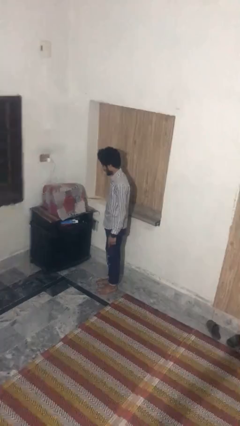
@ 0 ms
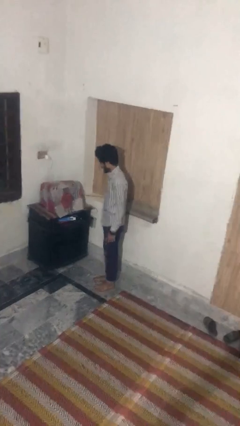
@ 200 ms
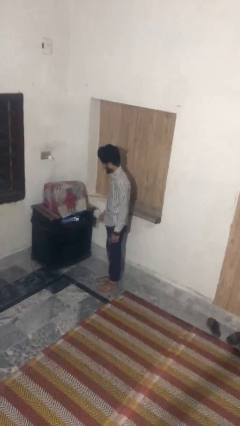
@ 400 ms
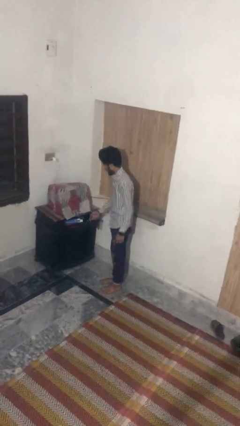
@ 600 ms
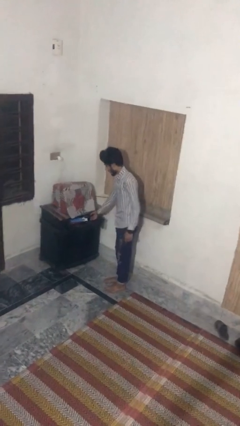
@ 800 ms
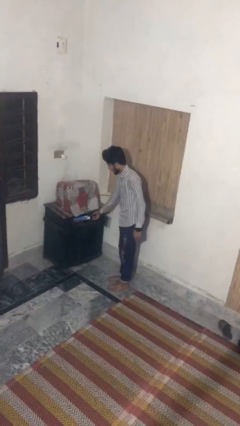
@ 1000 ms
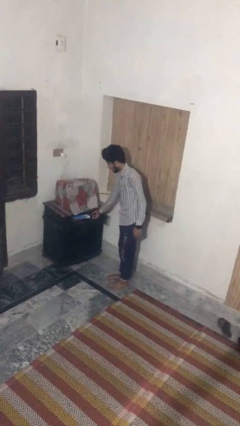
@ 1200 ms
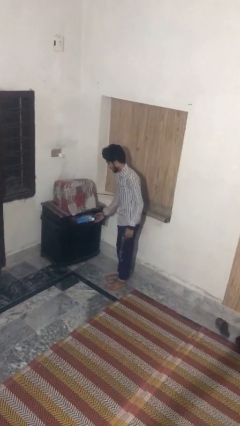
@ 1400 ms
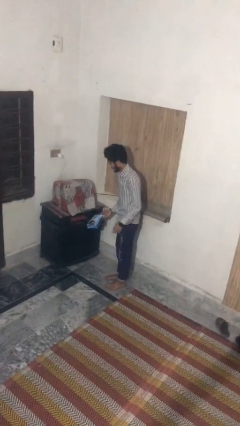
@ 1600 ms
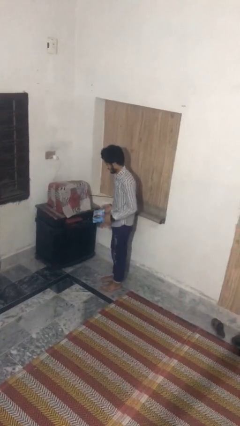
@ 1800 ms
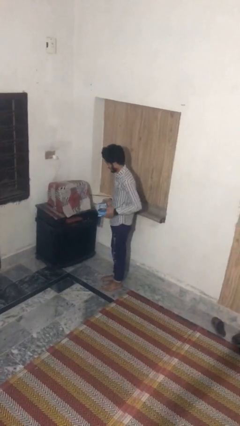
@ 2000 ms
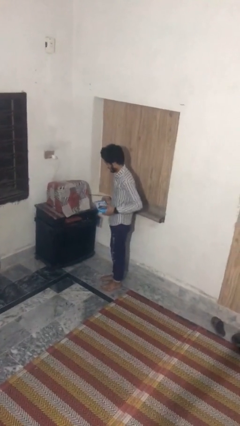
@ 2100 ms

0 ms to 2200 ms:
person picks up object from cabinet

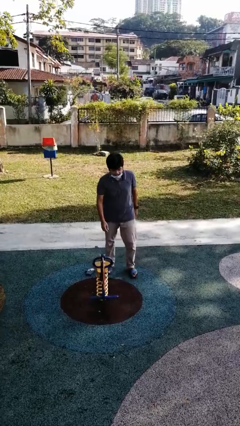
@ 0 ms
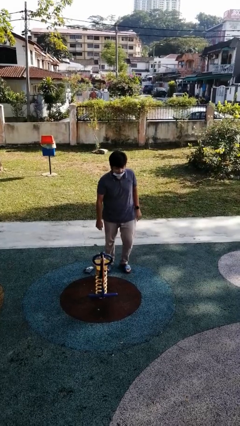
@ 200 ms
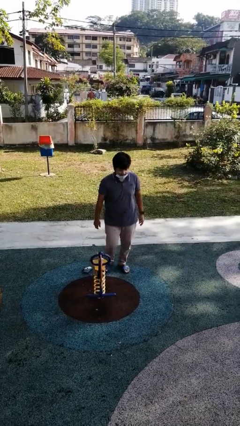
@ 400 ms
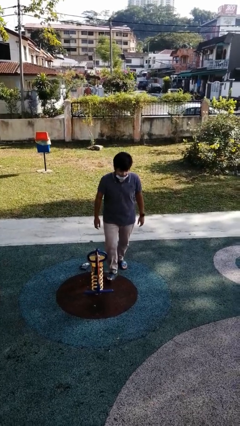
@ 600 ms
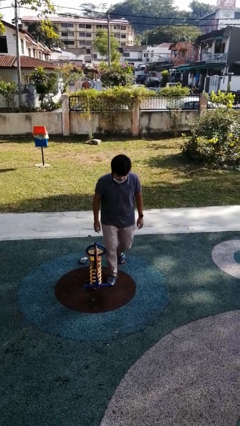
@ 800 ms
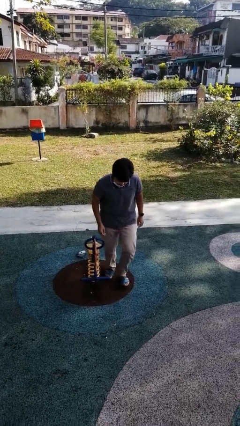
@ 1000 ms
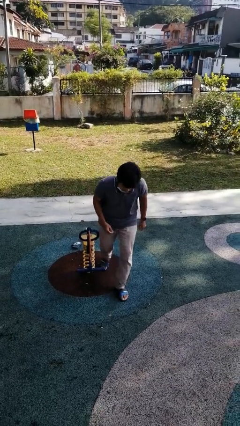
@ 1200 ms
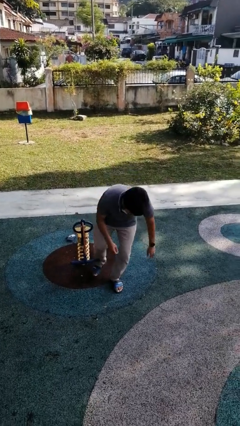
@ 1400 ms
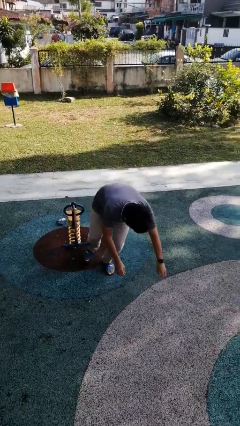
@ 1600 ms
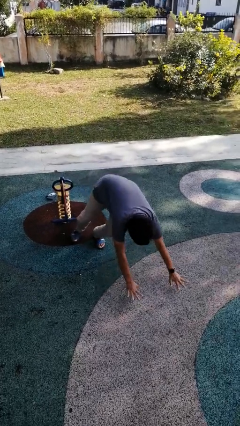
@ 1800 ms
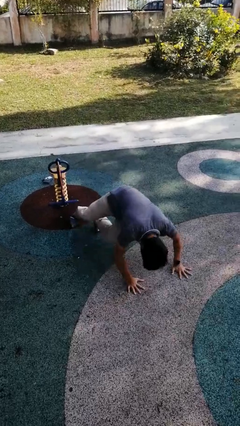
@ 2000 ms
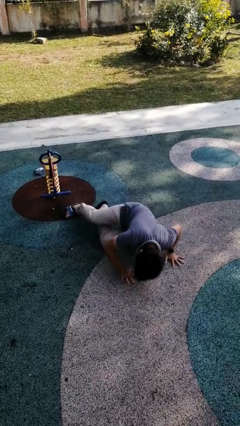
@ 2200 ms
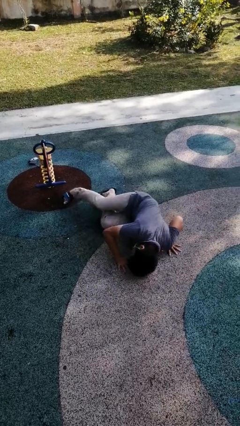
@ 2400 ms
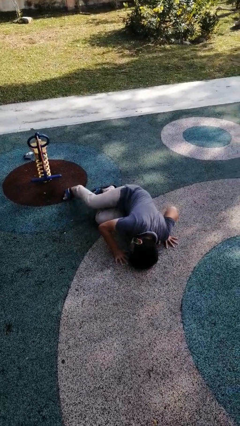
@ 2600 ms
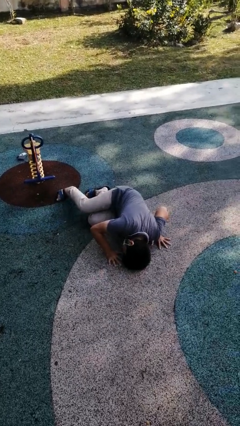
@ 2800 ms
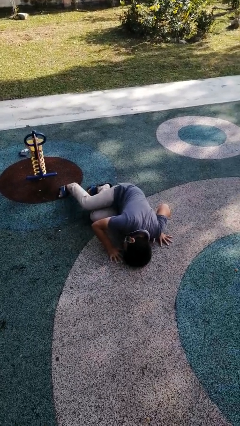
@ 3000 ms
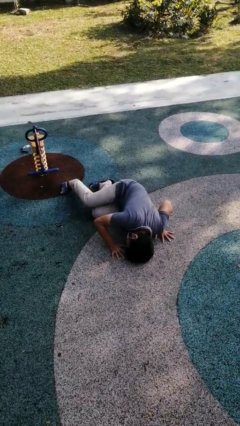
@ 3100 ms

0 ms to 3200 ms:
person trips on object on floor

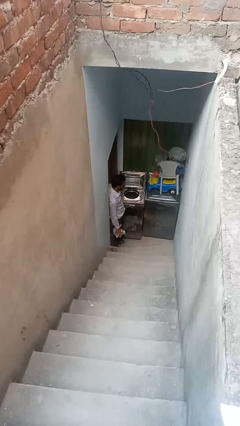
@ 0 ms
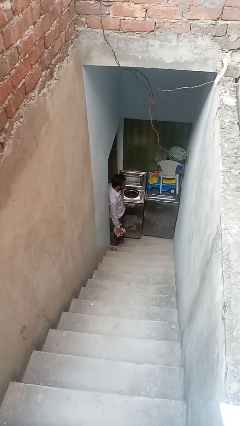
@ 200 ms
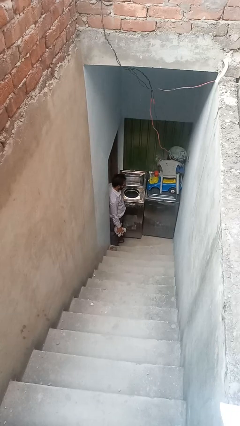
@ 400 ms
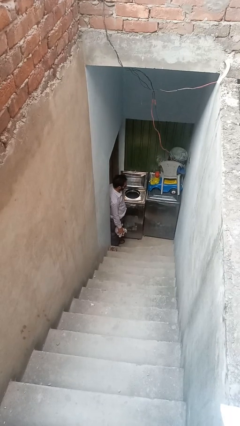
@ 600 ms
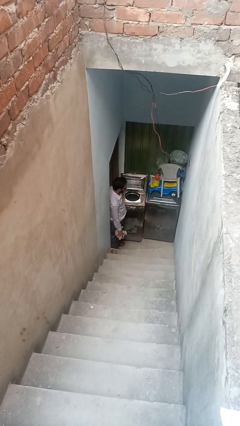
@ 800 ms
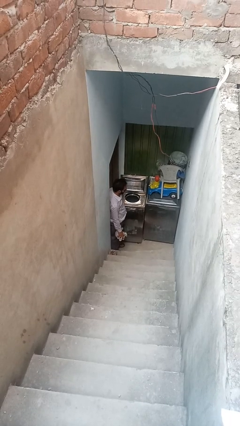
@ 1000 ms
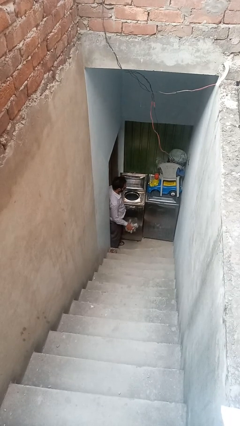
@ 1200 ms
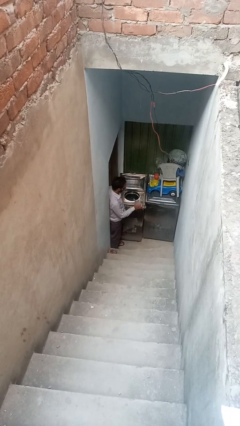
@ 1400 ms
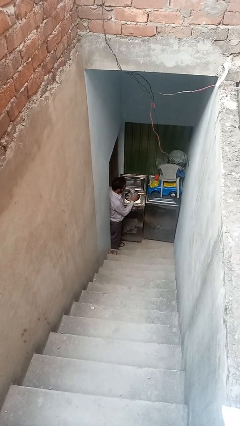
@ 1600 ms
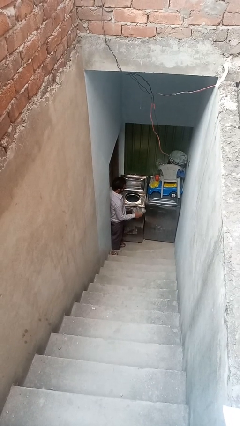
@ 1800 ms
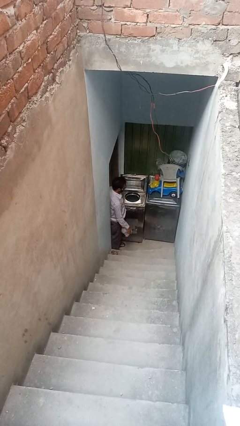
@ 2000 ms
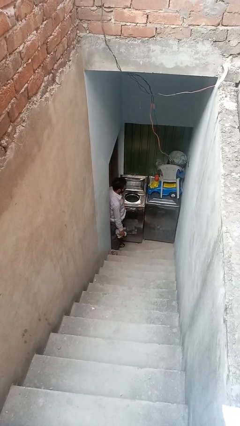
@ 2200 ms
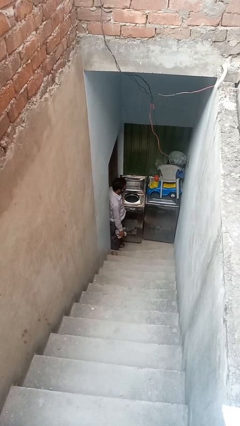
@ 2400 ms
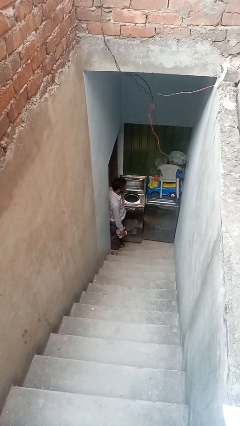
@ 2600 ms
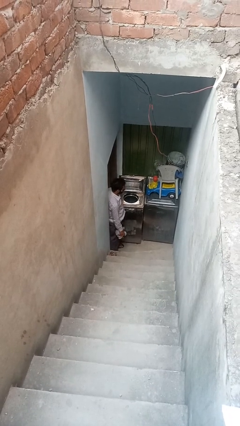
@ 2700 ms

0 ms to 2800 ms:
person unloads clotheswasher

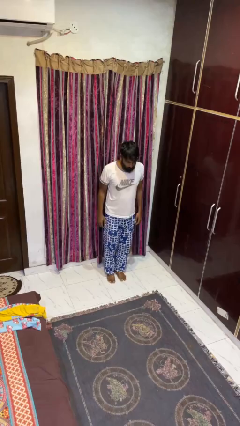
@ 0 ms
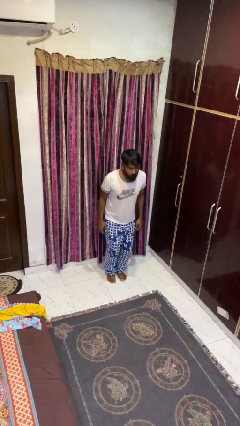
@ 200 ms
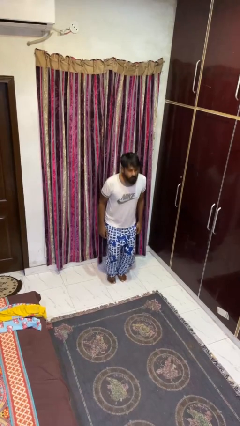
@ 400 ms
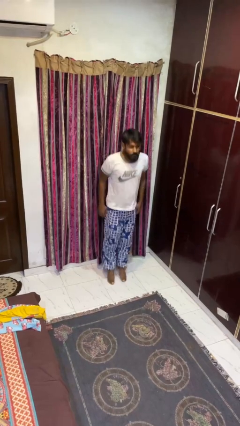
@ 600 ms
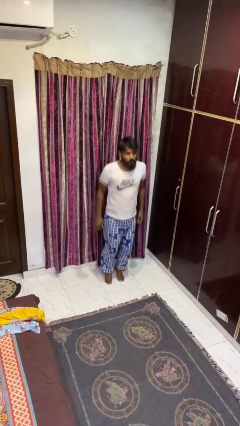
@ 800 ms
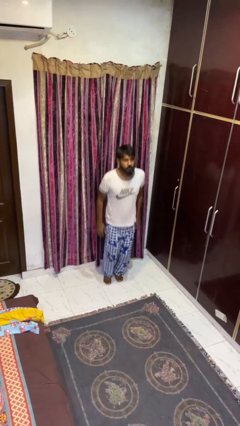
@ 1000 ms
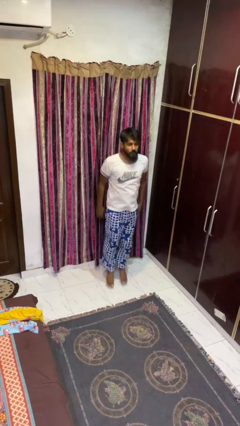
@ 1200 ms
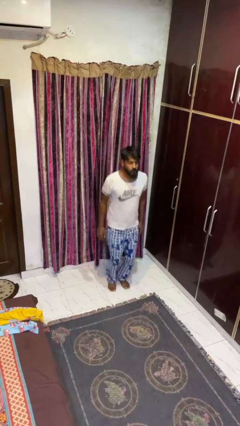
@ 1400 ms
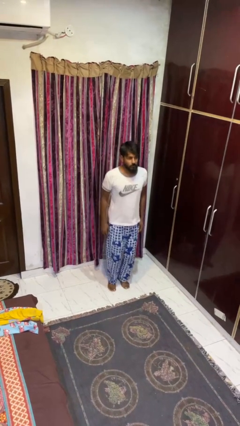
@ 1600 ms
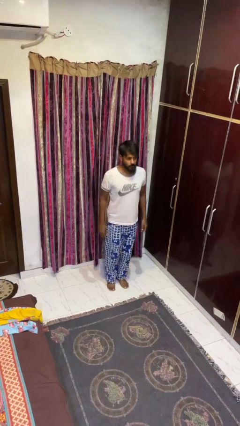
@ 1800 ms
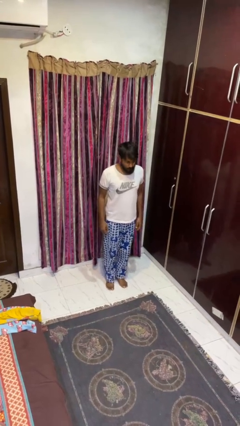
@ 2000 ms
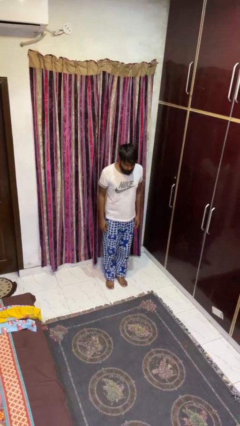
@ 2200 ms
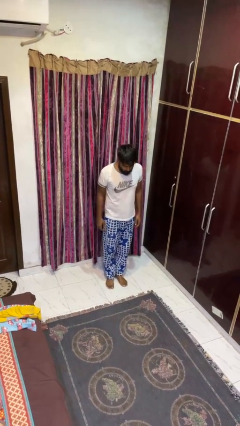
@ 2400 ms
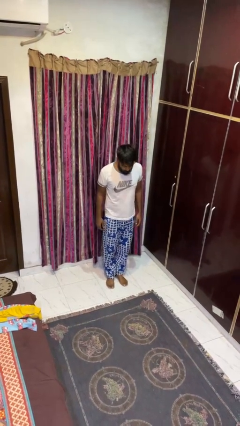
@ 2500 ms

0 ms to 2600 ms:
person jumps

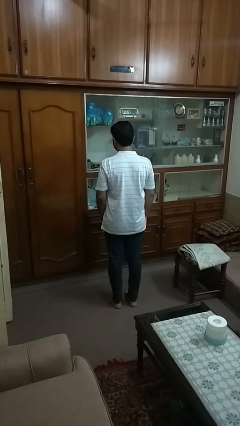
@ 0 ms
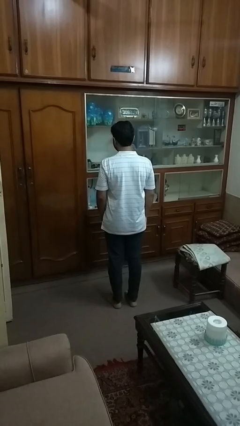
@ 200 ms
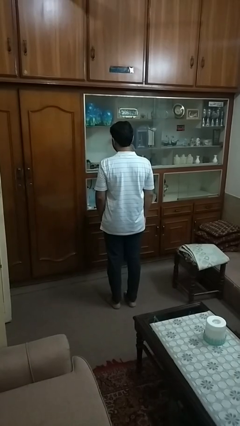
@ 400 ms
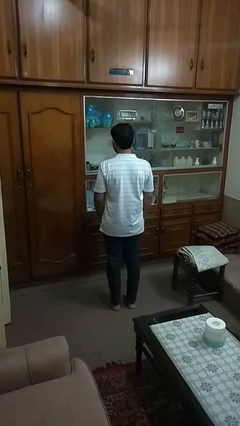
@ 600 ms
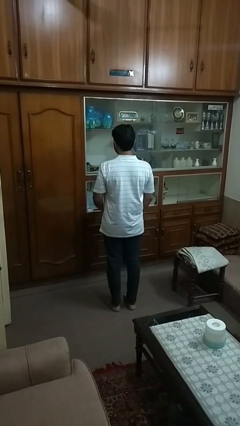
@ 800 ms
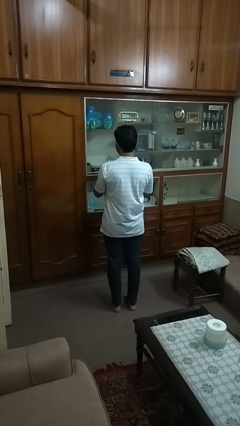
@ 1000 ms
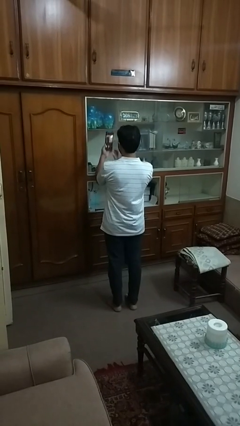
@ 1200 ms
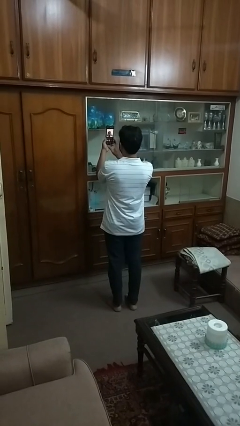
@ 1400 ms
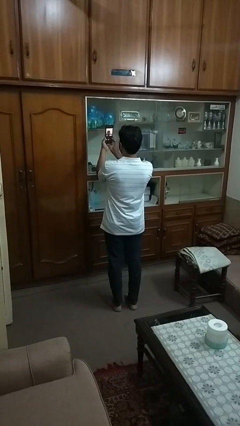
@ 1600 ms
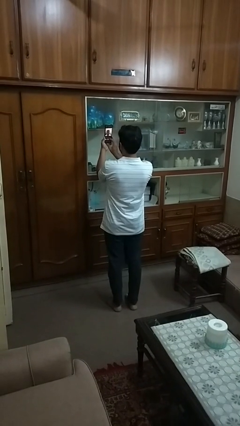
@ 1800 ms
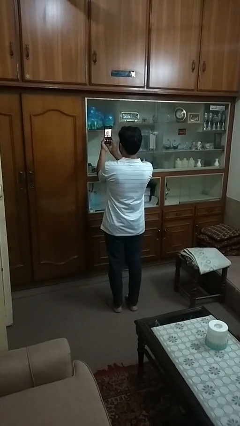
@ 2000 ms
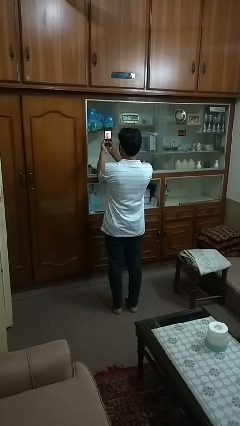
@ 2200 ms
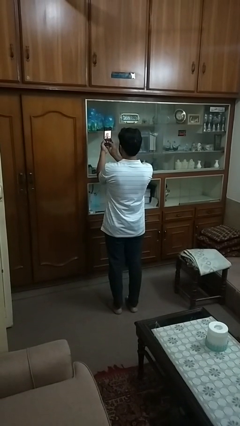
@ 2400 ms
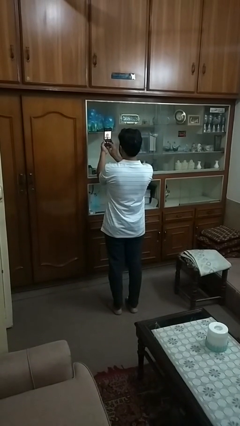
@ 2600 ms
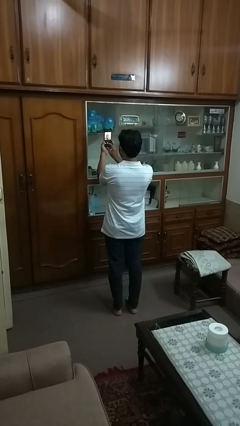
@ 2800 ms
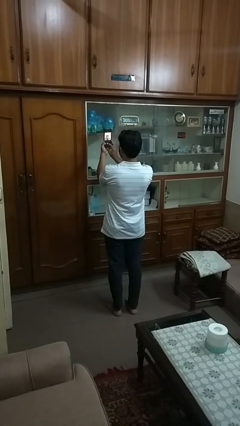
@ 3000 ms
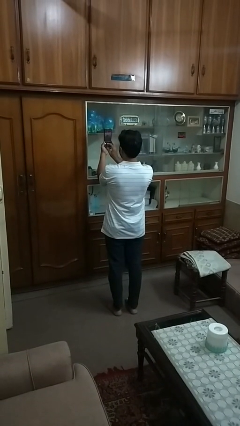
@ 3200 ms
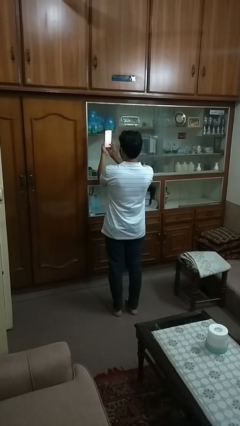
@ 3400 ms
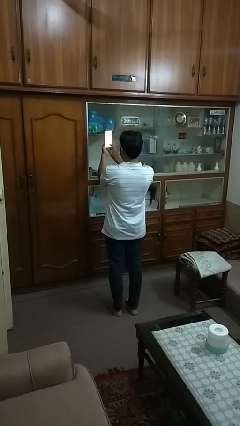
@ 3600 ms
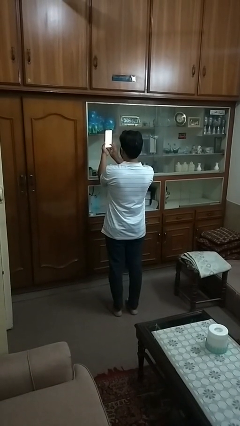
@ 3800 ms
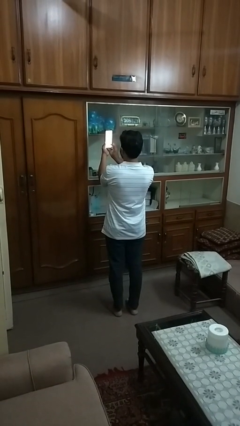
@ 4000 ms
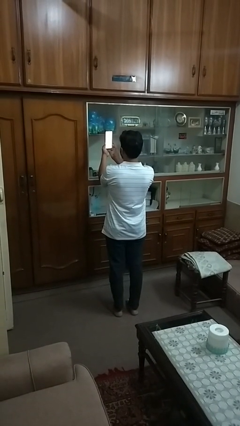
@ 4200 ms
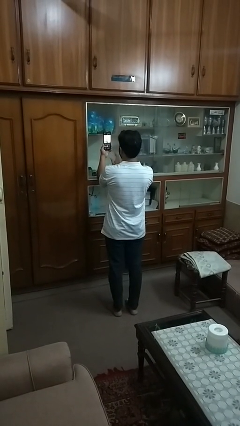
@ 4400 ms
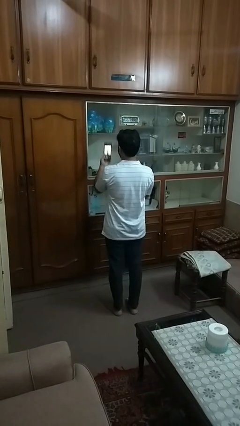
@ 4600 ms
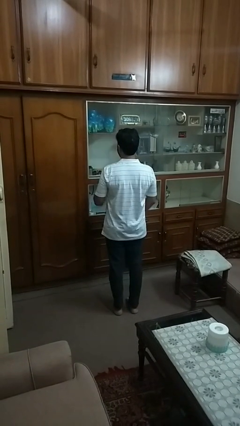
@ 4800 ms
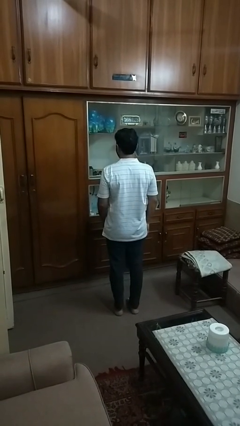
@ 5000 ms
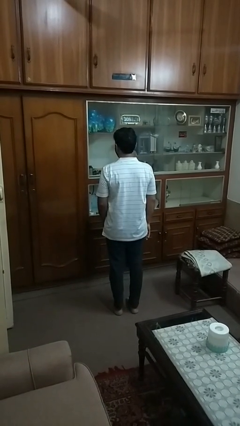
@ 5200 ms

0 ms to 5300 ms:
person takes selfie

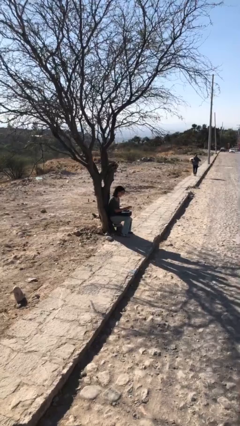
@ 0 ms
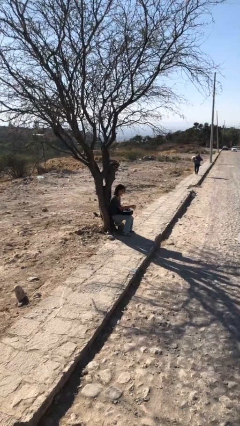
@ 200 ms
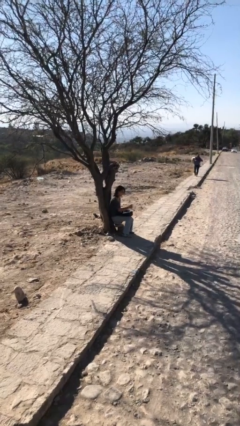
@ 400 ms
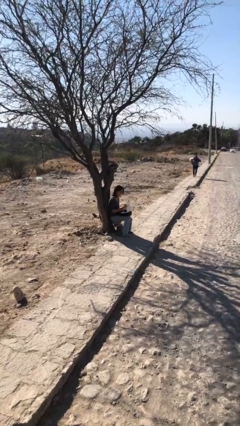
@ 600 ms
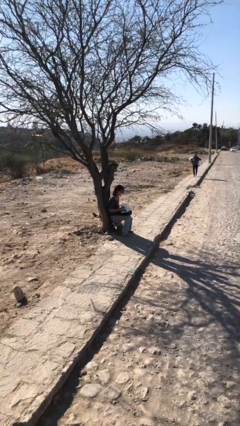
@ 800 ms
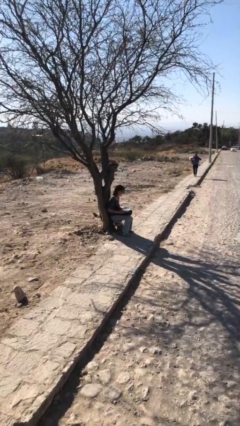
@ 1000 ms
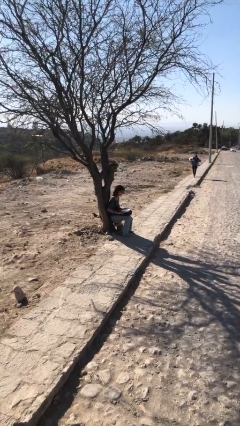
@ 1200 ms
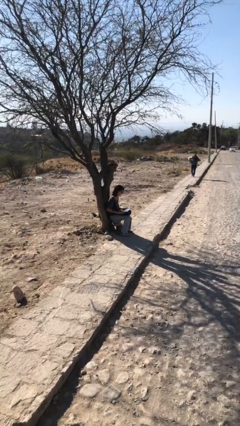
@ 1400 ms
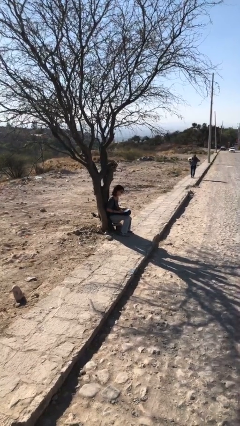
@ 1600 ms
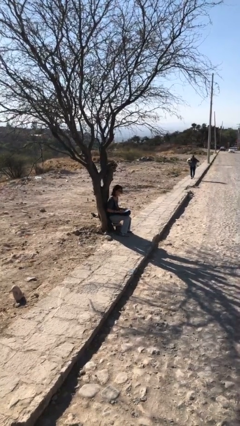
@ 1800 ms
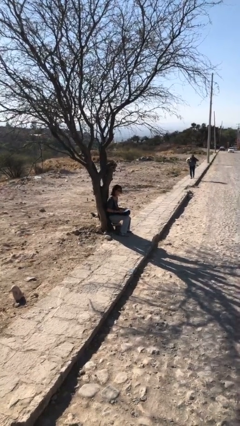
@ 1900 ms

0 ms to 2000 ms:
person interacts with laptop
